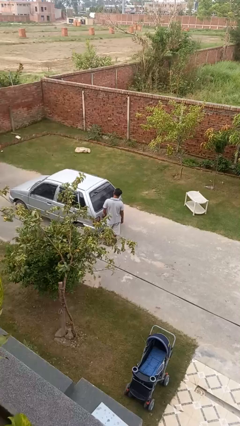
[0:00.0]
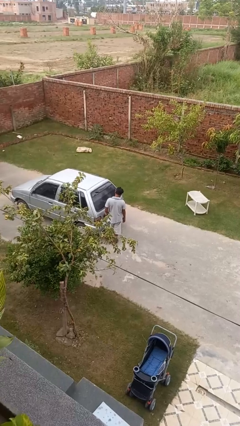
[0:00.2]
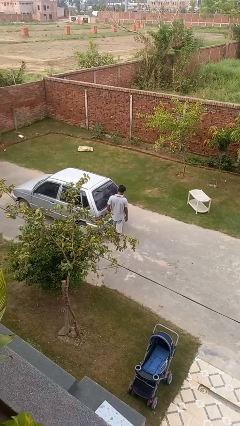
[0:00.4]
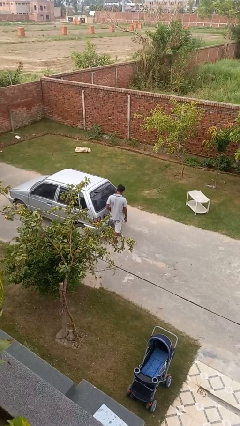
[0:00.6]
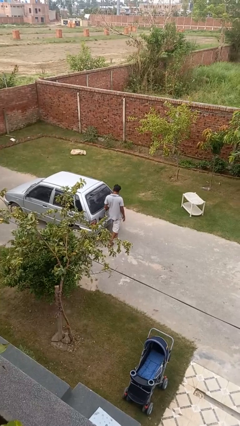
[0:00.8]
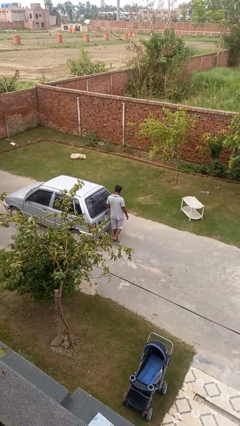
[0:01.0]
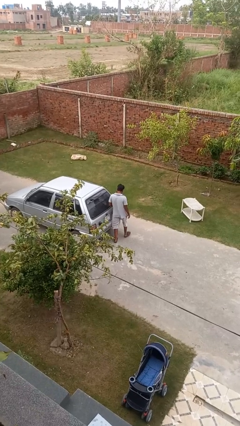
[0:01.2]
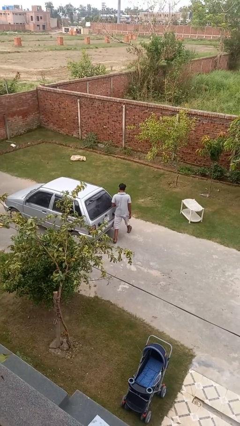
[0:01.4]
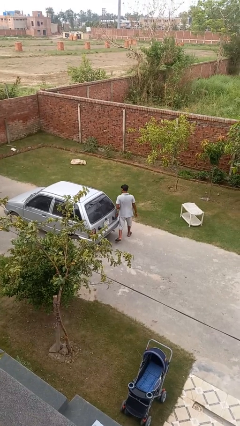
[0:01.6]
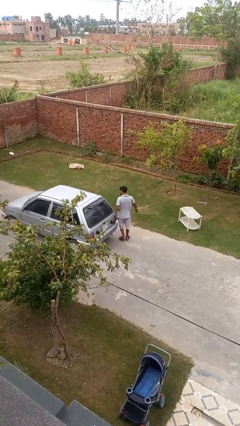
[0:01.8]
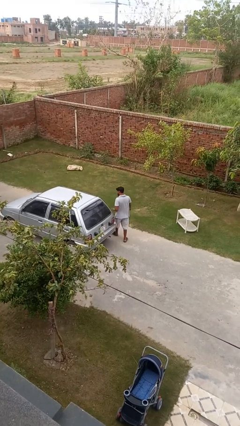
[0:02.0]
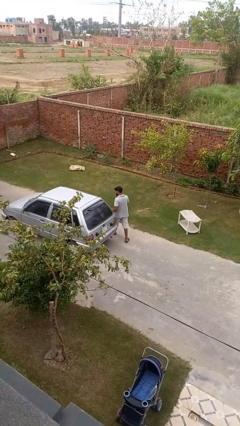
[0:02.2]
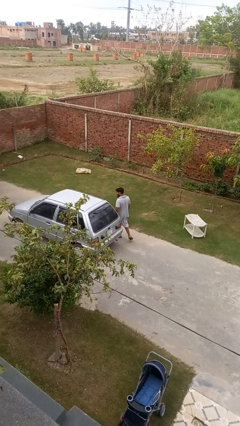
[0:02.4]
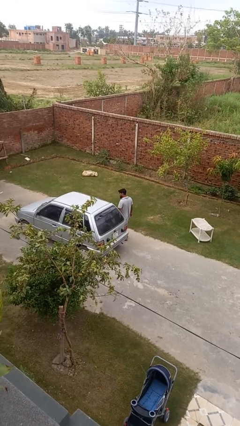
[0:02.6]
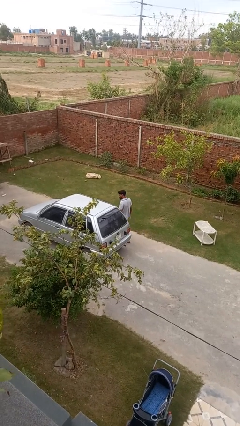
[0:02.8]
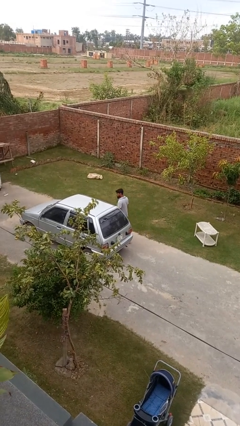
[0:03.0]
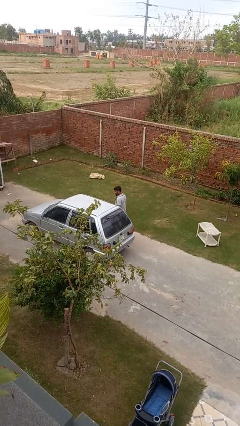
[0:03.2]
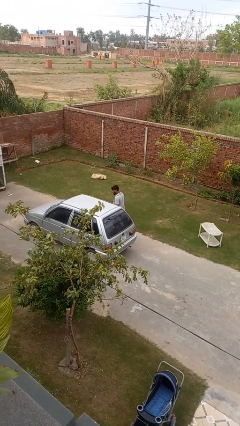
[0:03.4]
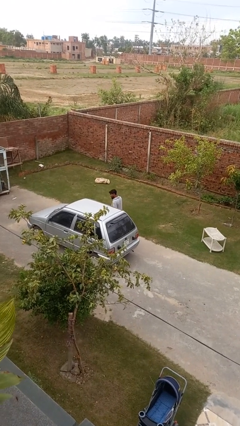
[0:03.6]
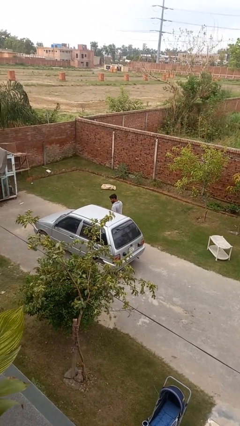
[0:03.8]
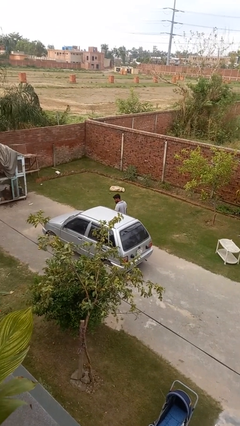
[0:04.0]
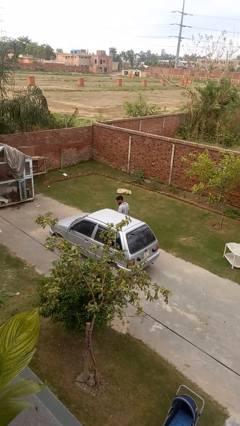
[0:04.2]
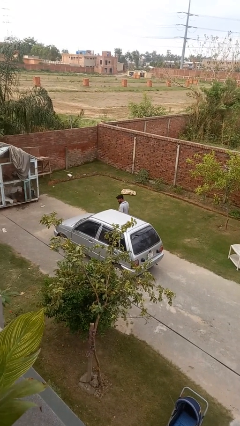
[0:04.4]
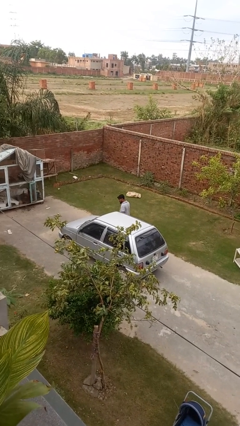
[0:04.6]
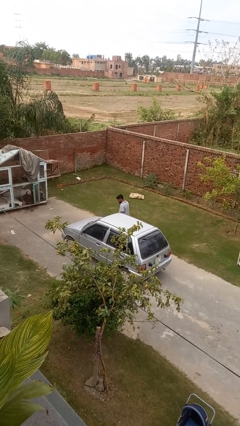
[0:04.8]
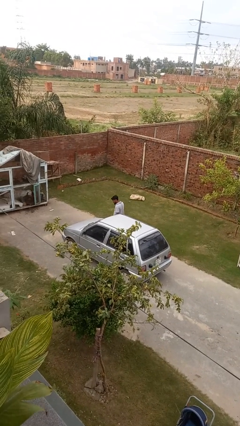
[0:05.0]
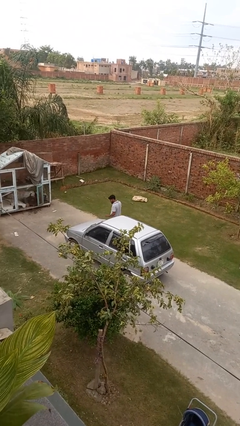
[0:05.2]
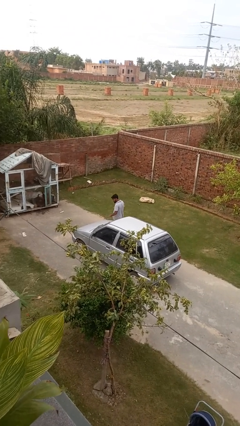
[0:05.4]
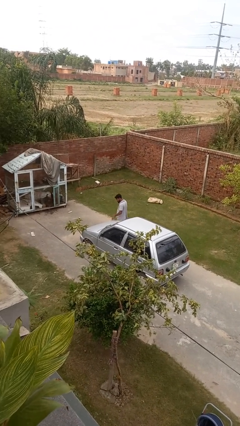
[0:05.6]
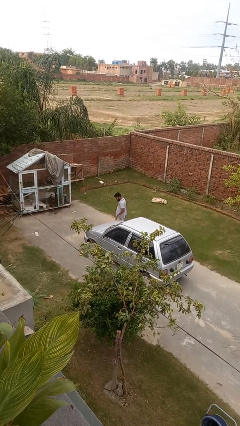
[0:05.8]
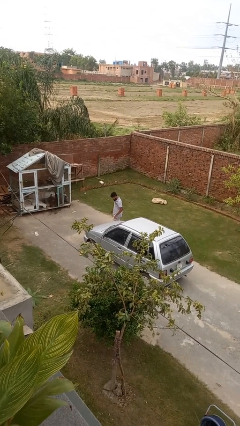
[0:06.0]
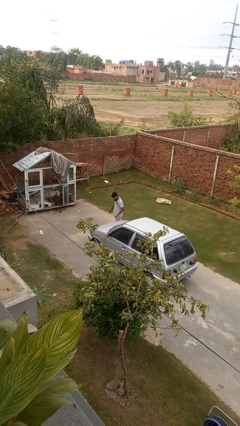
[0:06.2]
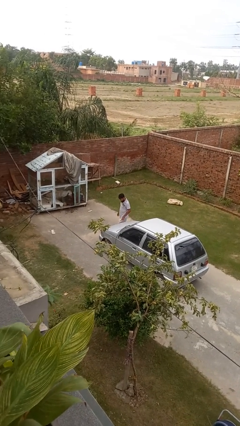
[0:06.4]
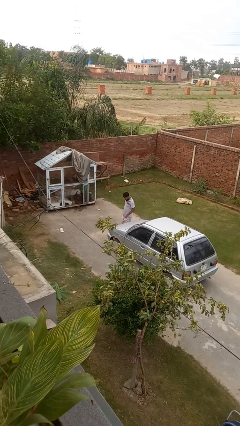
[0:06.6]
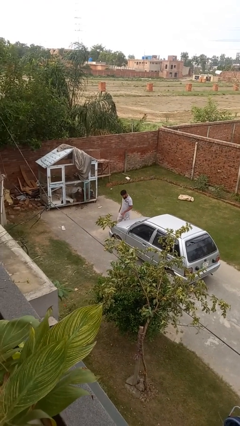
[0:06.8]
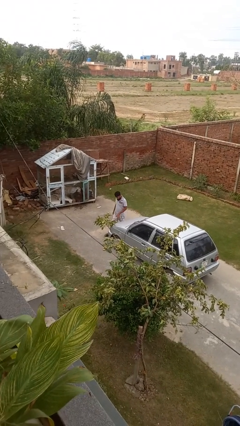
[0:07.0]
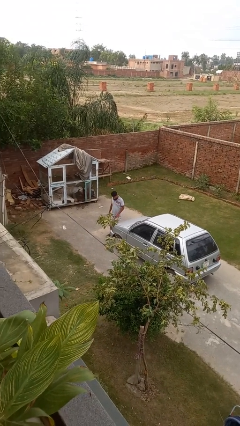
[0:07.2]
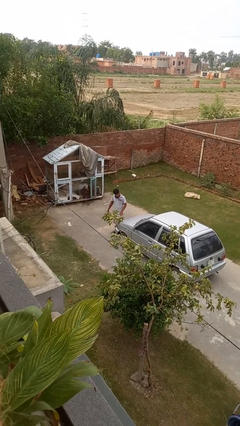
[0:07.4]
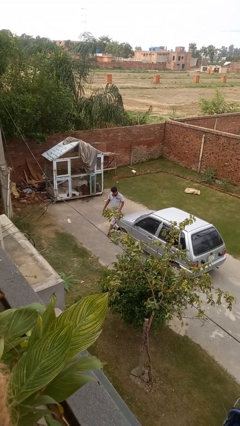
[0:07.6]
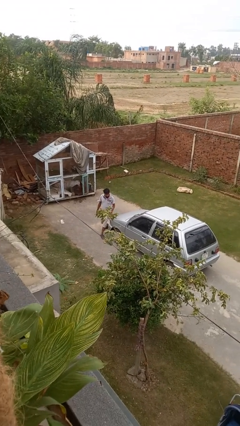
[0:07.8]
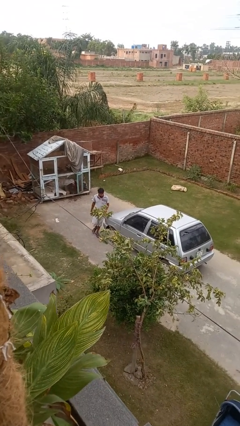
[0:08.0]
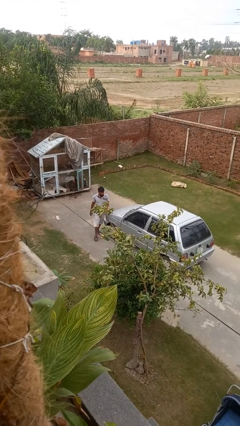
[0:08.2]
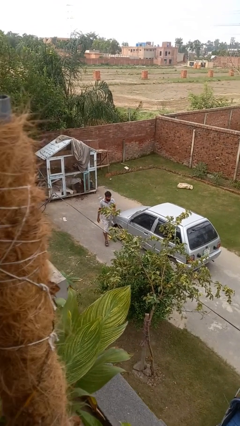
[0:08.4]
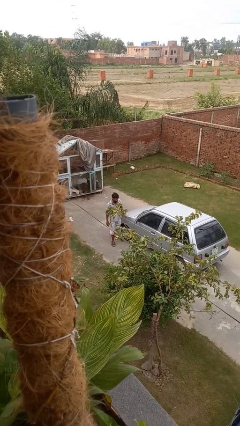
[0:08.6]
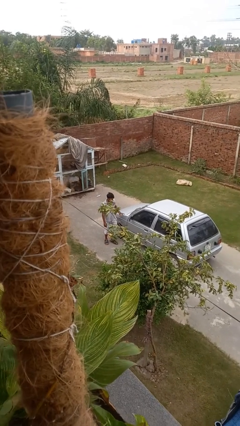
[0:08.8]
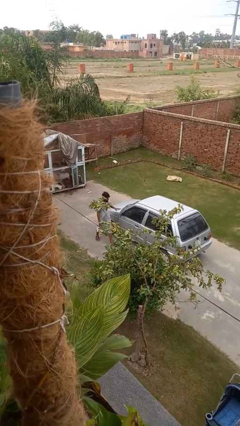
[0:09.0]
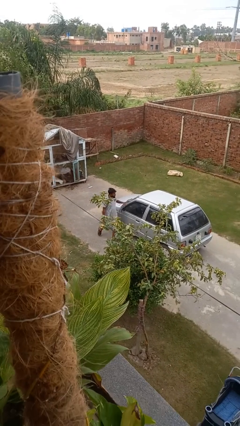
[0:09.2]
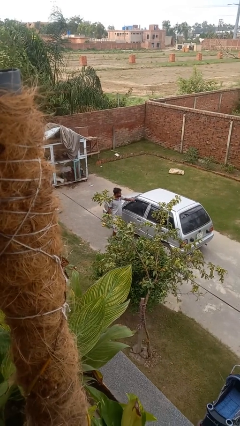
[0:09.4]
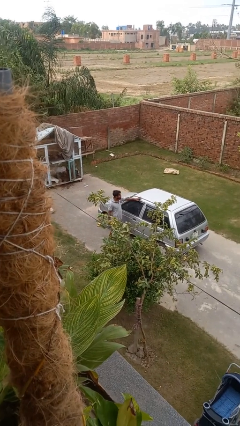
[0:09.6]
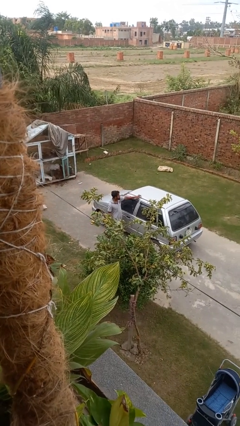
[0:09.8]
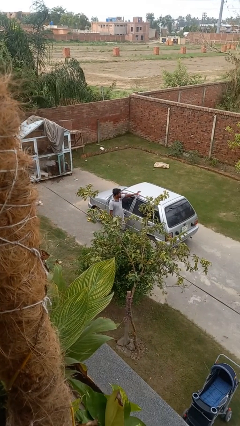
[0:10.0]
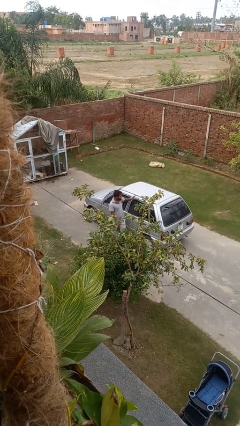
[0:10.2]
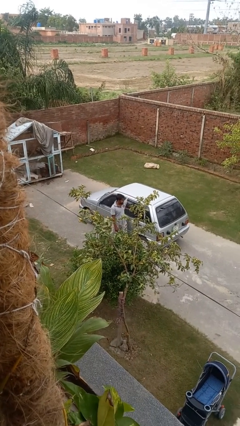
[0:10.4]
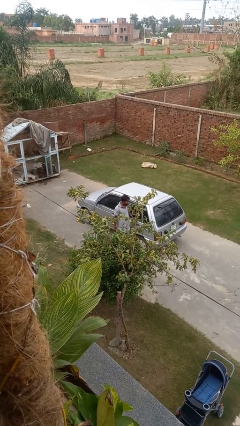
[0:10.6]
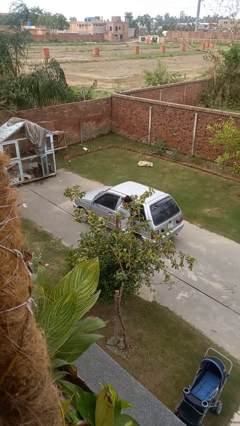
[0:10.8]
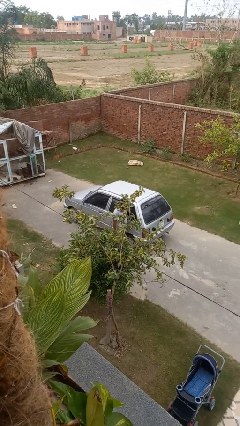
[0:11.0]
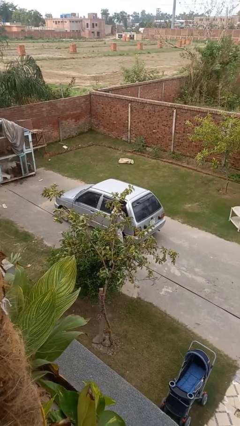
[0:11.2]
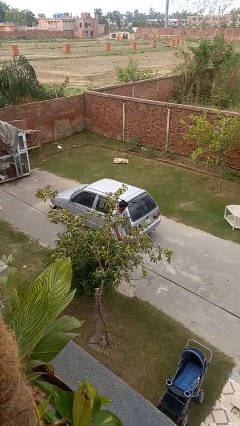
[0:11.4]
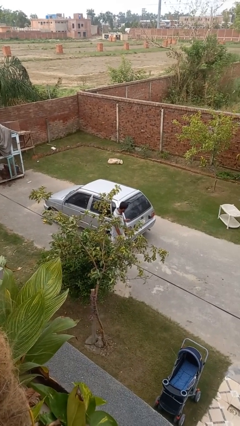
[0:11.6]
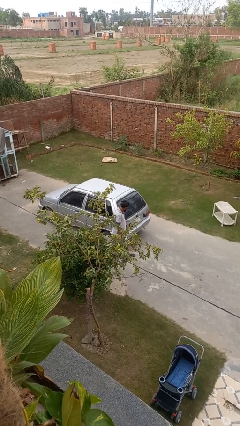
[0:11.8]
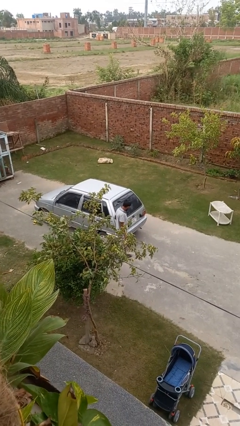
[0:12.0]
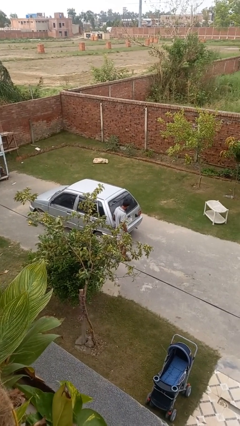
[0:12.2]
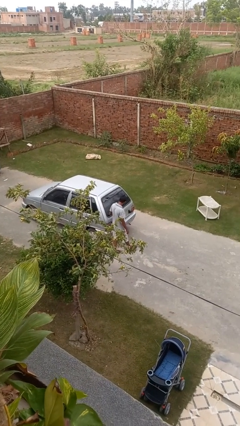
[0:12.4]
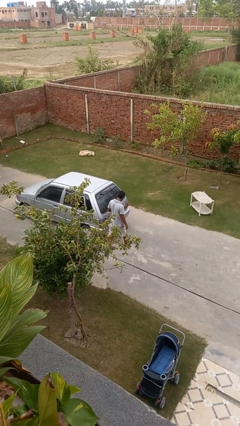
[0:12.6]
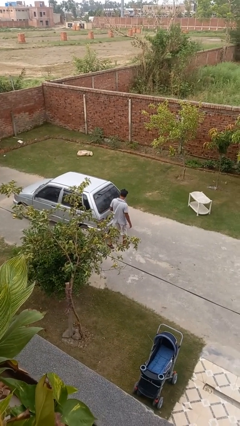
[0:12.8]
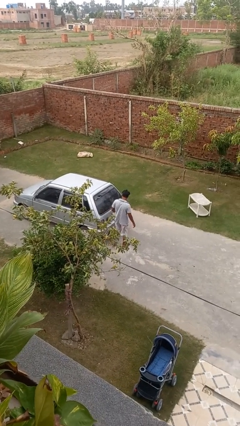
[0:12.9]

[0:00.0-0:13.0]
person walks around car

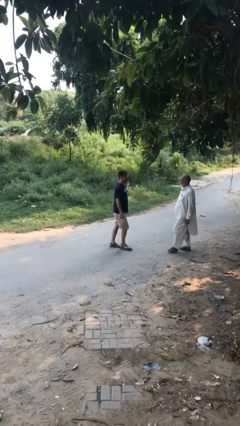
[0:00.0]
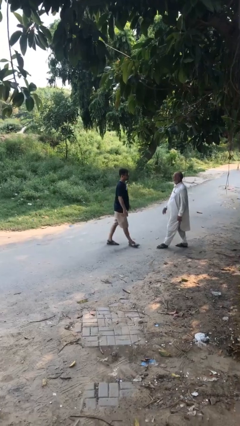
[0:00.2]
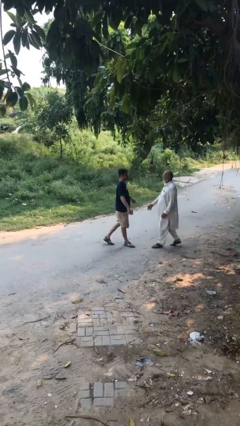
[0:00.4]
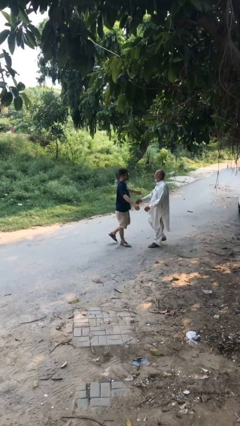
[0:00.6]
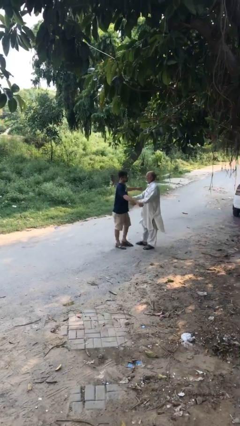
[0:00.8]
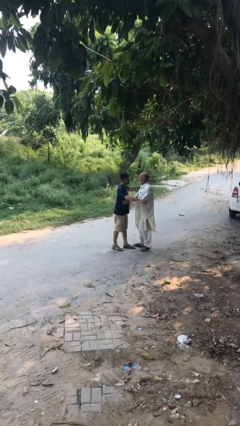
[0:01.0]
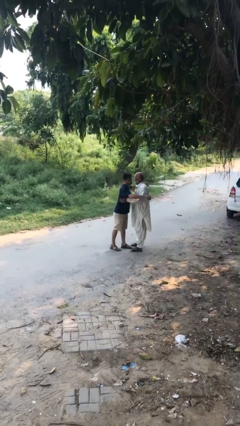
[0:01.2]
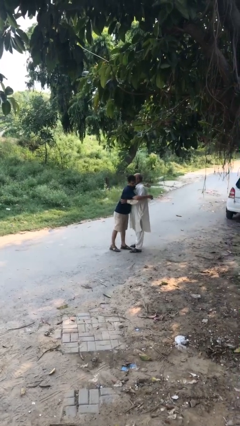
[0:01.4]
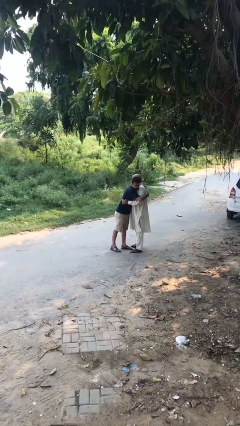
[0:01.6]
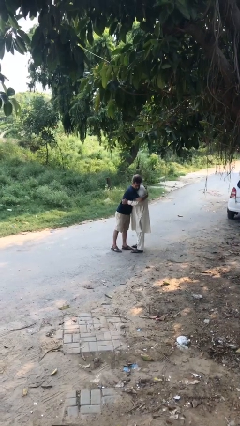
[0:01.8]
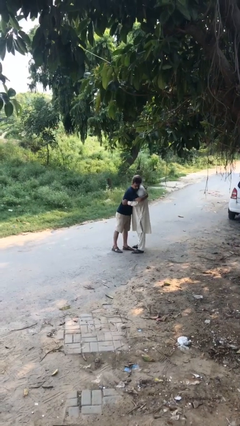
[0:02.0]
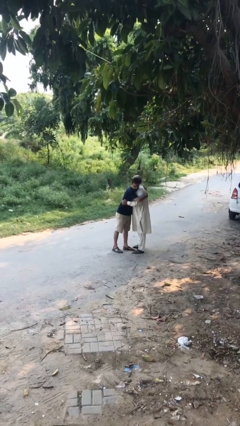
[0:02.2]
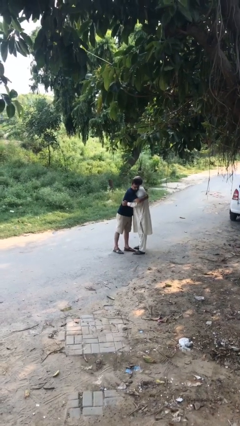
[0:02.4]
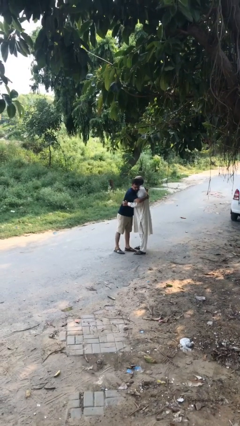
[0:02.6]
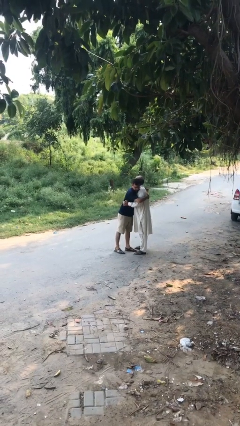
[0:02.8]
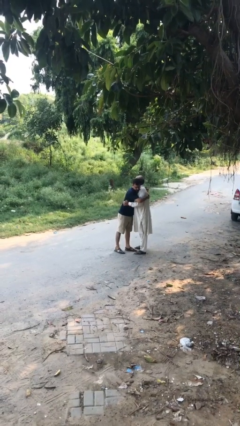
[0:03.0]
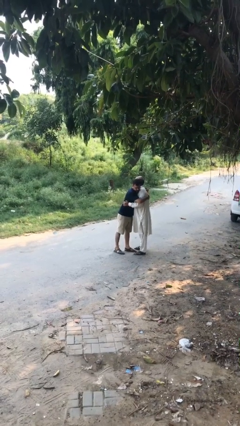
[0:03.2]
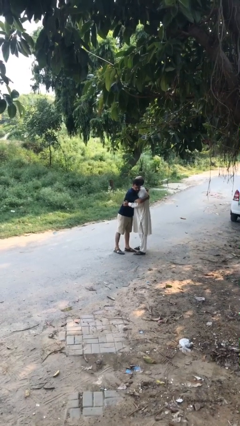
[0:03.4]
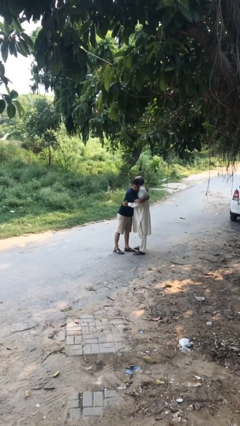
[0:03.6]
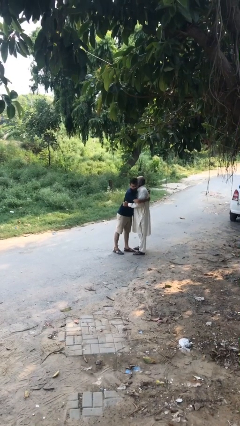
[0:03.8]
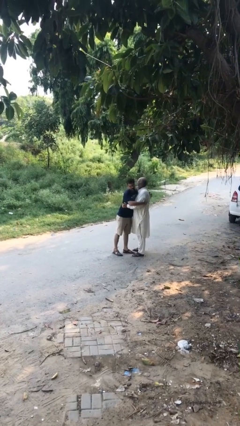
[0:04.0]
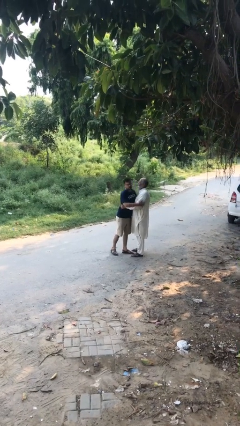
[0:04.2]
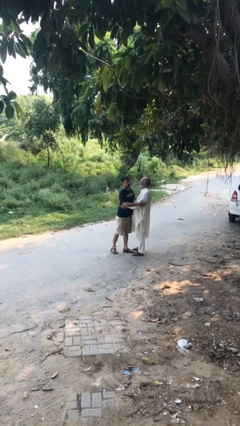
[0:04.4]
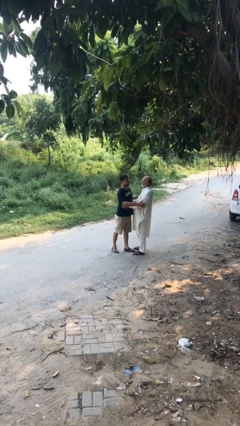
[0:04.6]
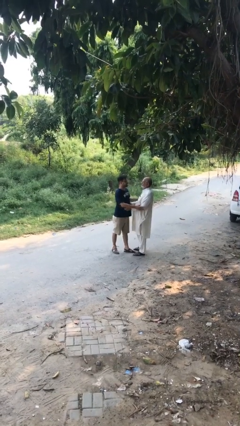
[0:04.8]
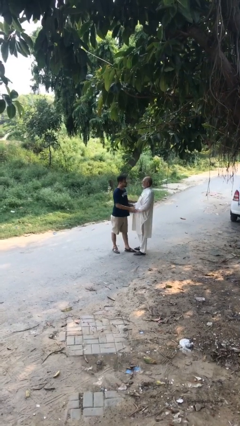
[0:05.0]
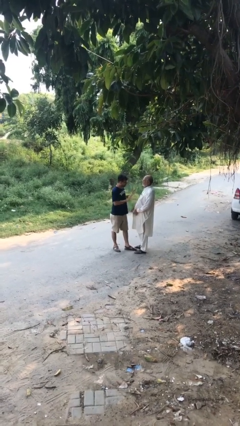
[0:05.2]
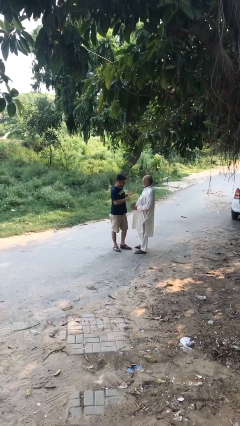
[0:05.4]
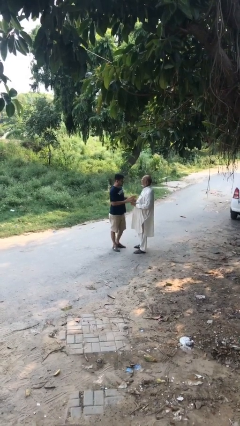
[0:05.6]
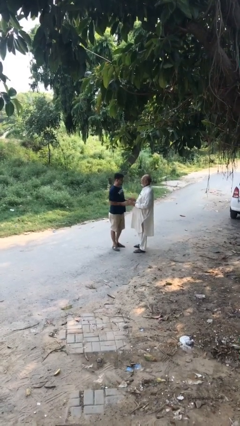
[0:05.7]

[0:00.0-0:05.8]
person embraces person
